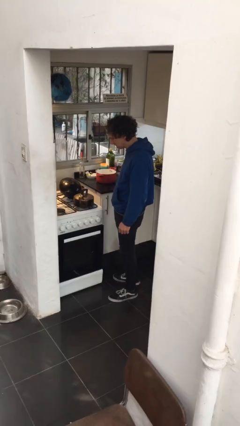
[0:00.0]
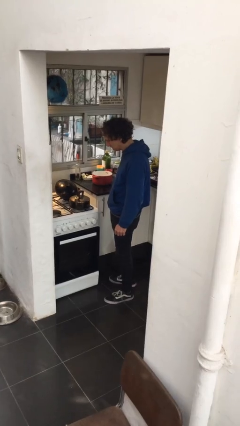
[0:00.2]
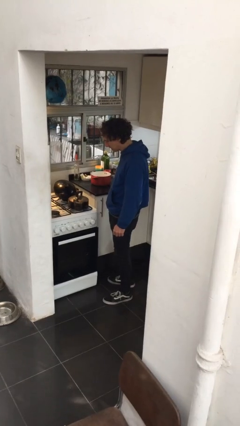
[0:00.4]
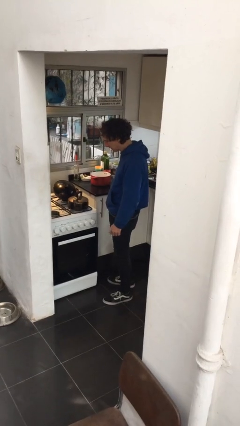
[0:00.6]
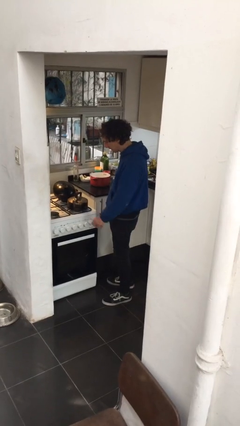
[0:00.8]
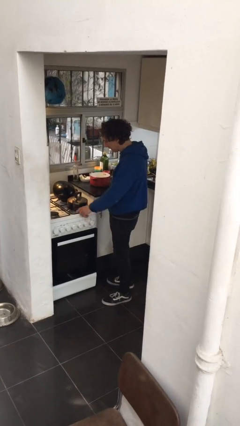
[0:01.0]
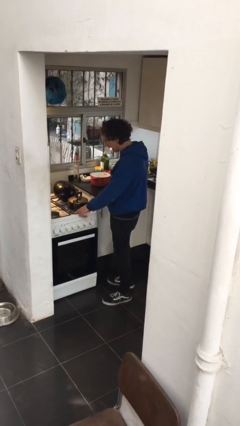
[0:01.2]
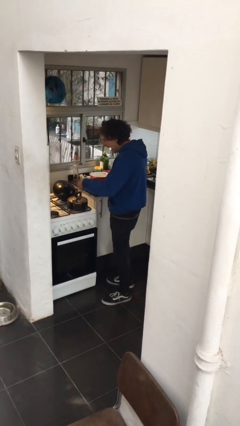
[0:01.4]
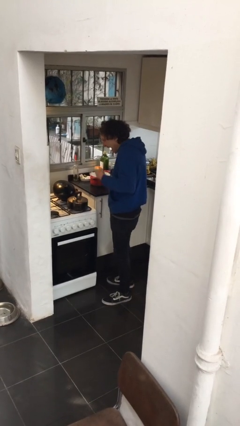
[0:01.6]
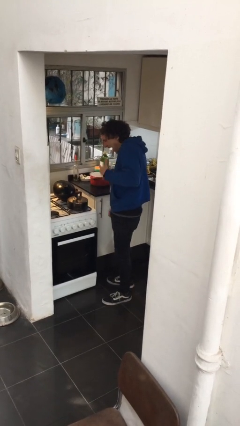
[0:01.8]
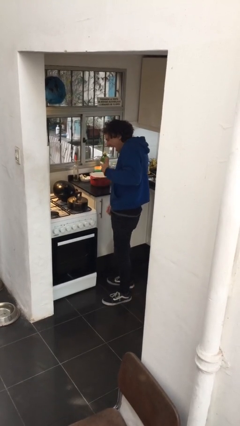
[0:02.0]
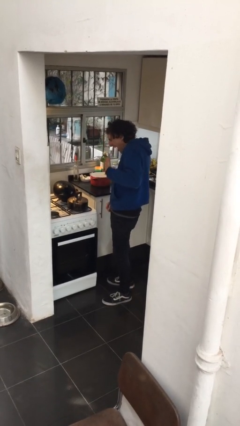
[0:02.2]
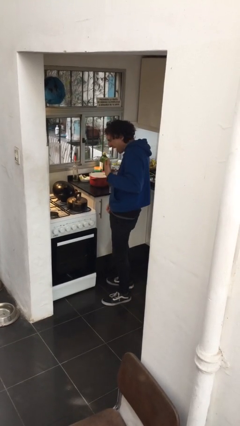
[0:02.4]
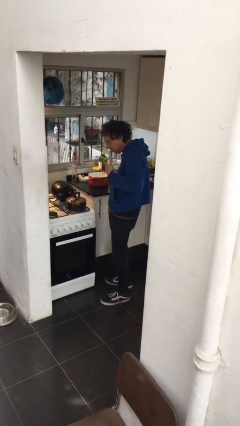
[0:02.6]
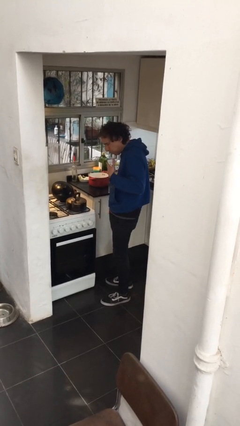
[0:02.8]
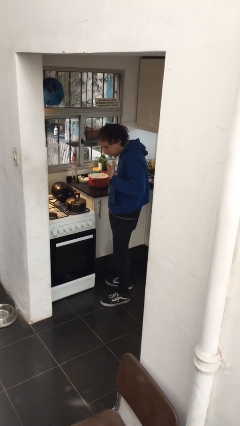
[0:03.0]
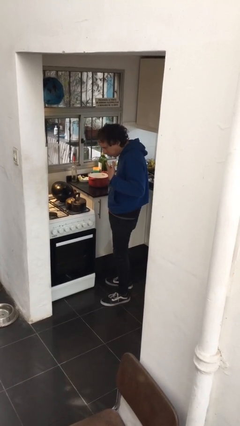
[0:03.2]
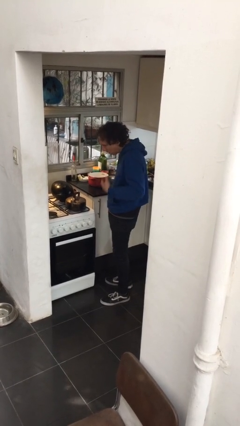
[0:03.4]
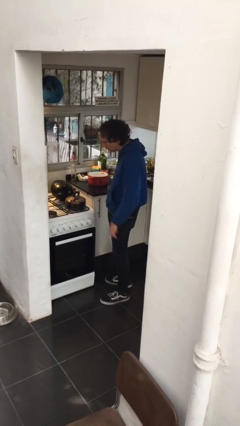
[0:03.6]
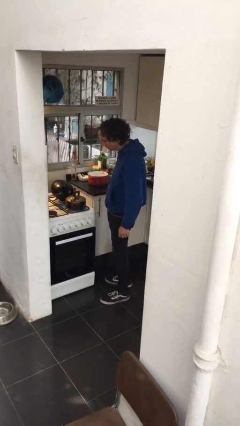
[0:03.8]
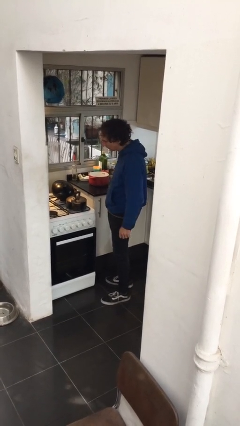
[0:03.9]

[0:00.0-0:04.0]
person burns hand

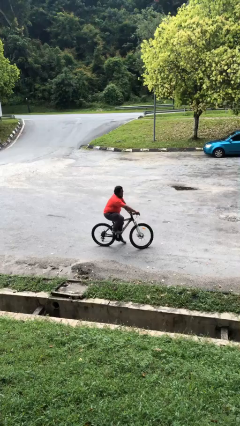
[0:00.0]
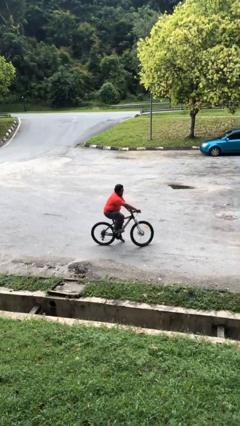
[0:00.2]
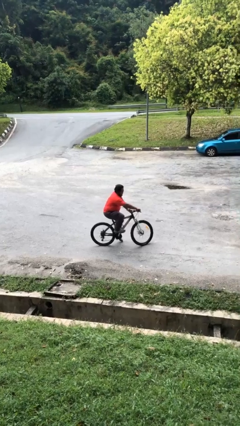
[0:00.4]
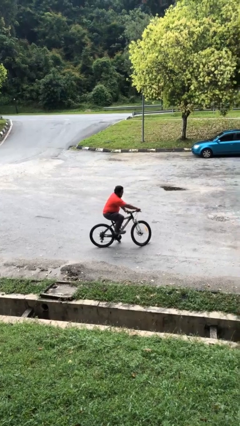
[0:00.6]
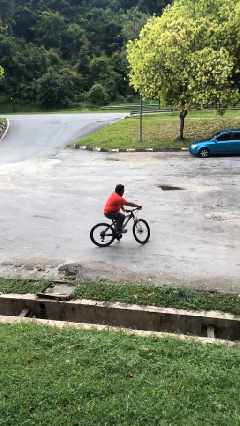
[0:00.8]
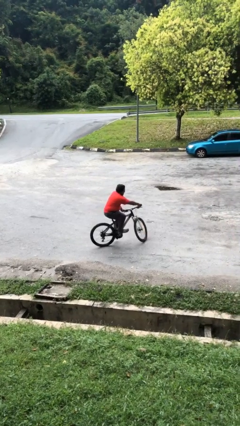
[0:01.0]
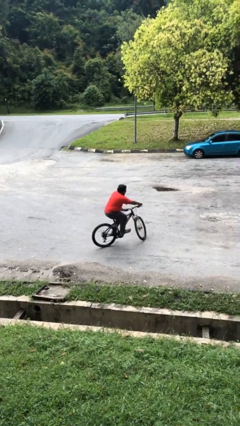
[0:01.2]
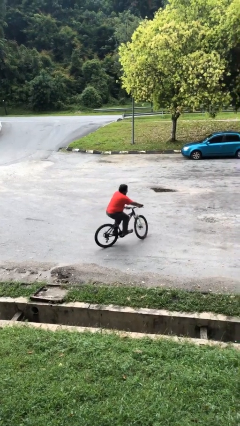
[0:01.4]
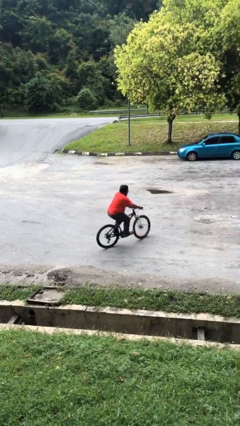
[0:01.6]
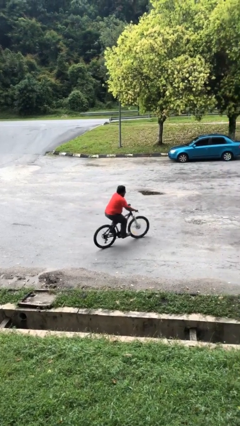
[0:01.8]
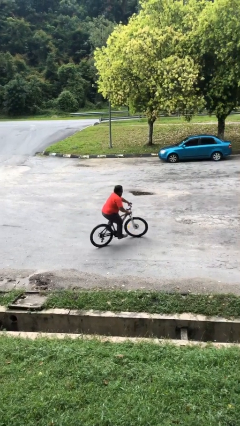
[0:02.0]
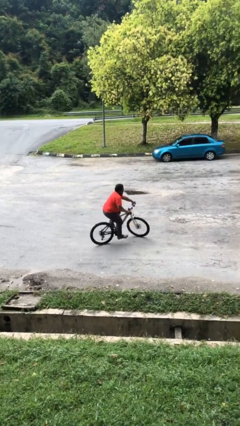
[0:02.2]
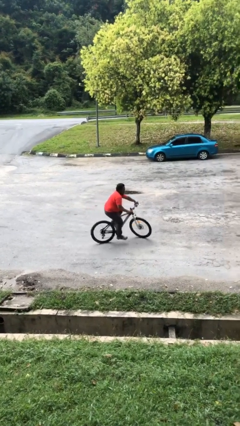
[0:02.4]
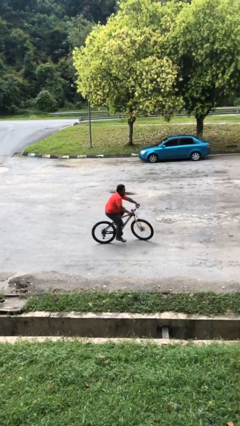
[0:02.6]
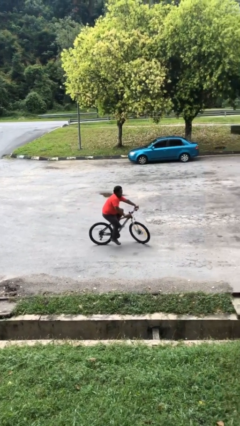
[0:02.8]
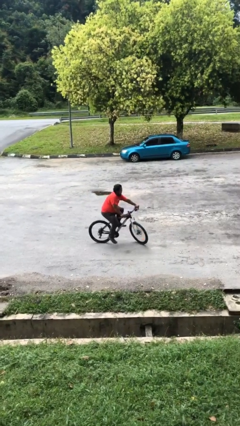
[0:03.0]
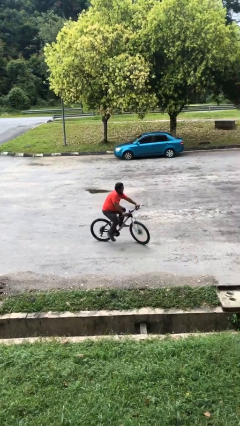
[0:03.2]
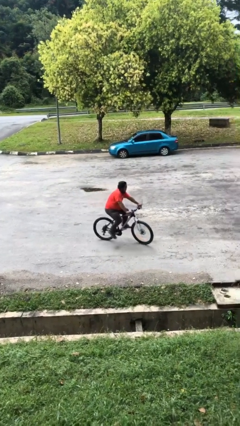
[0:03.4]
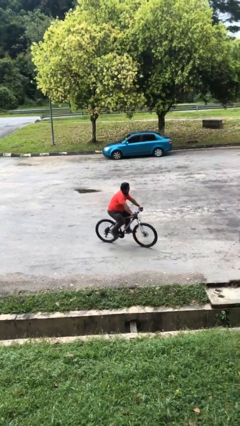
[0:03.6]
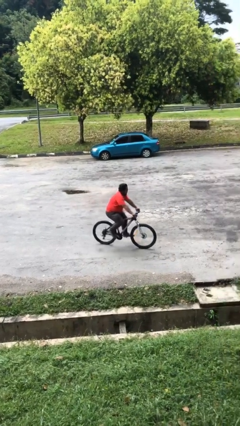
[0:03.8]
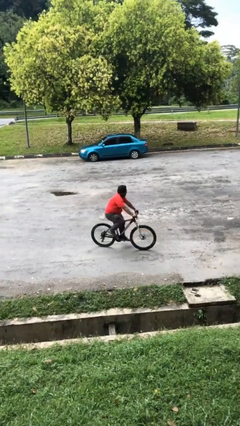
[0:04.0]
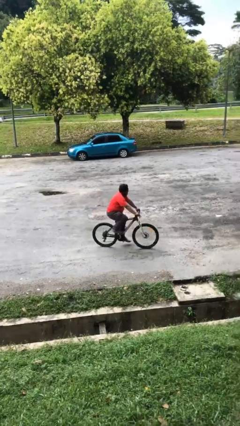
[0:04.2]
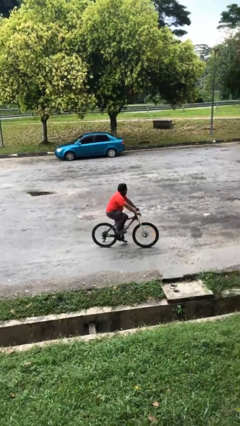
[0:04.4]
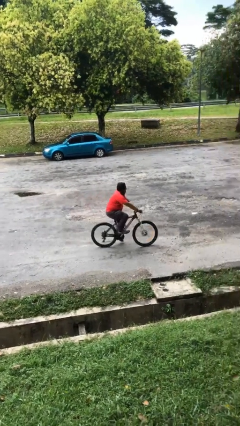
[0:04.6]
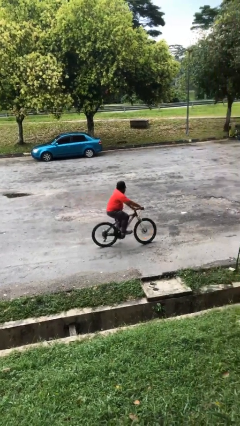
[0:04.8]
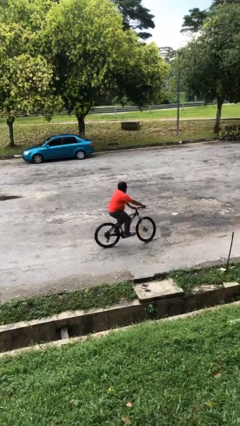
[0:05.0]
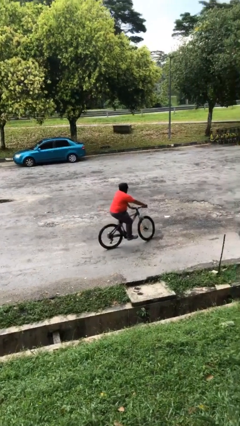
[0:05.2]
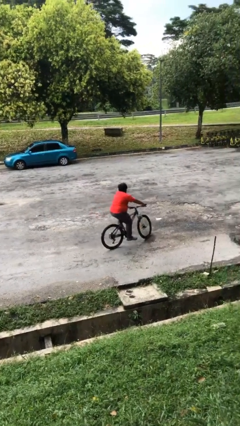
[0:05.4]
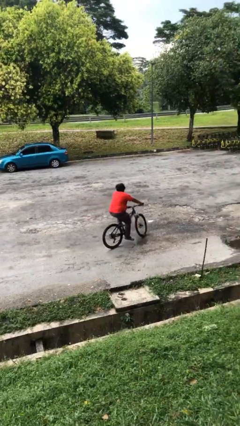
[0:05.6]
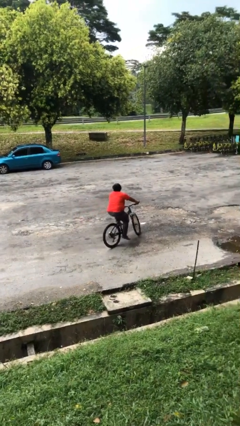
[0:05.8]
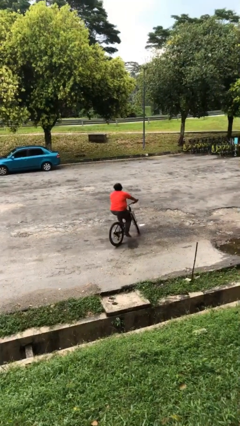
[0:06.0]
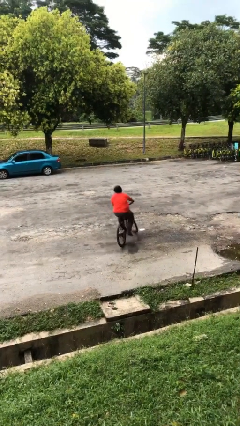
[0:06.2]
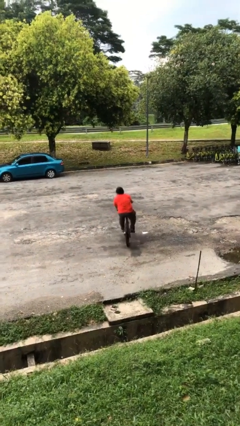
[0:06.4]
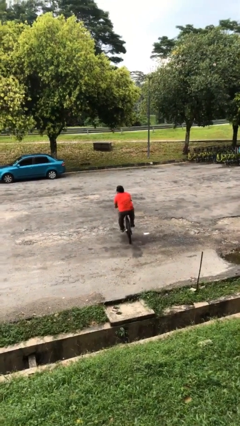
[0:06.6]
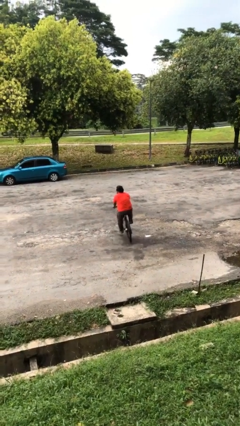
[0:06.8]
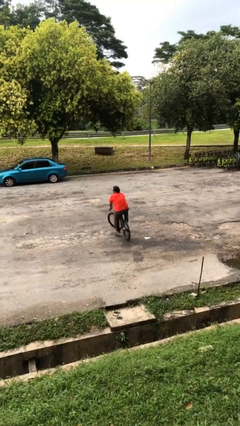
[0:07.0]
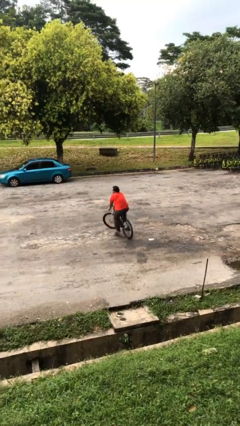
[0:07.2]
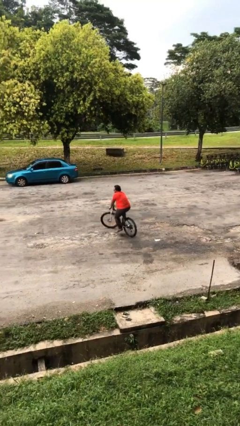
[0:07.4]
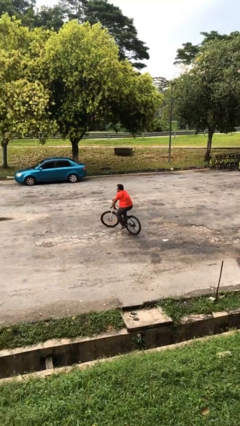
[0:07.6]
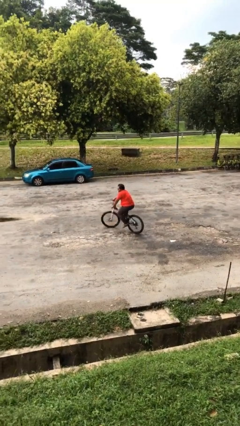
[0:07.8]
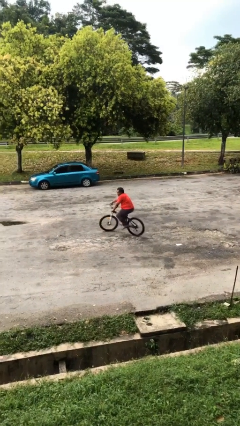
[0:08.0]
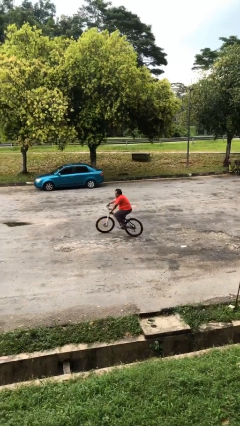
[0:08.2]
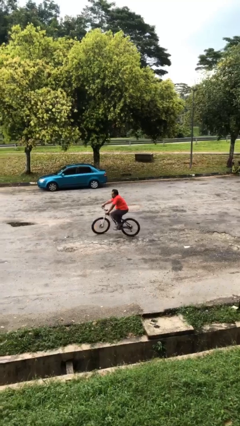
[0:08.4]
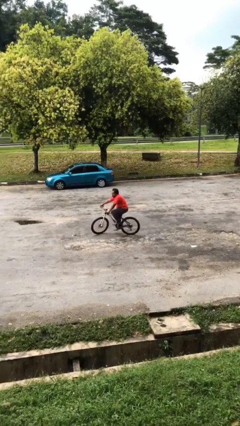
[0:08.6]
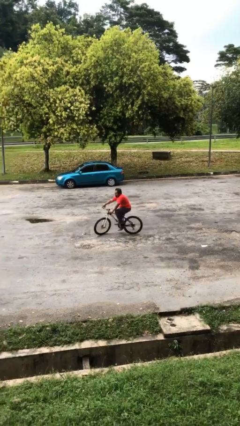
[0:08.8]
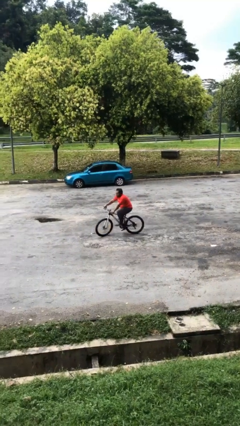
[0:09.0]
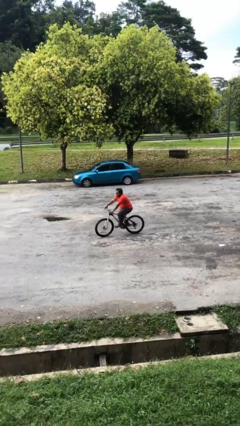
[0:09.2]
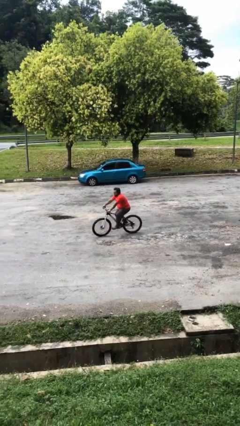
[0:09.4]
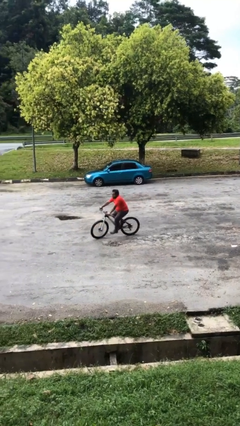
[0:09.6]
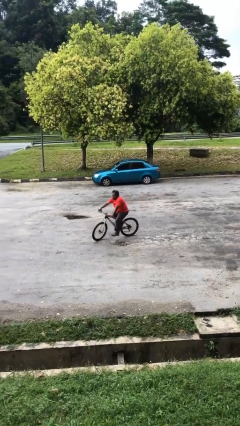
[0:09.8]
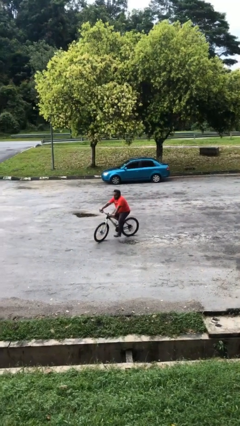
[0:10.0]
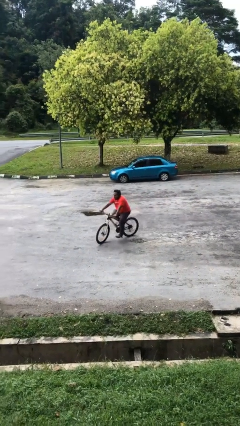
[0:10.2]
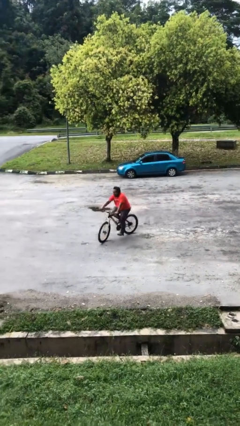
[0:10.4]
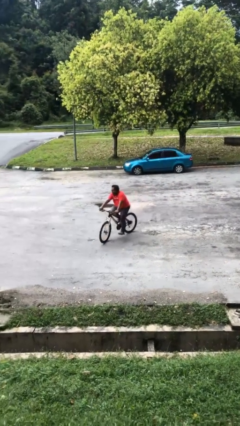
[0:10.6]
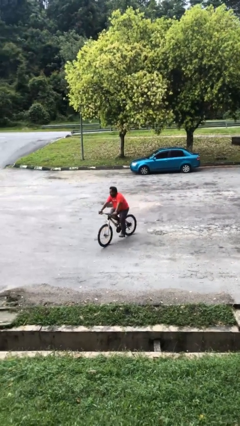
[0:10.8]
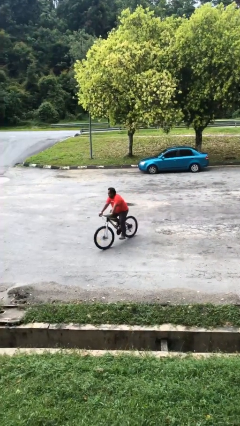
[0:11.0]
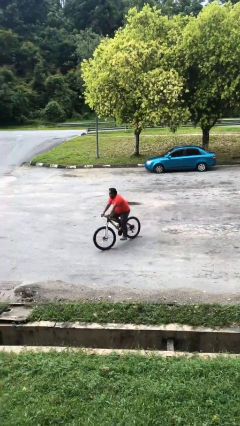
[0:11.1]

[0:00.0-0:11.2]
person rides bicycle

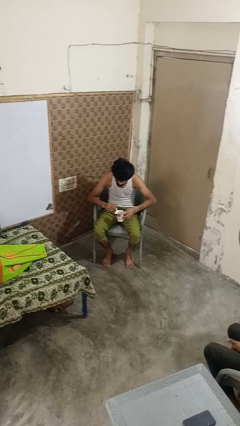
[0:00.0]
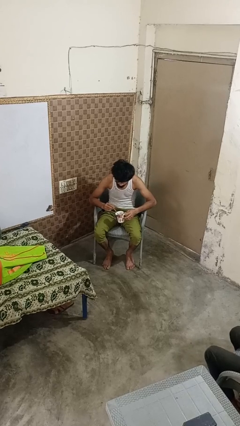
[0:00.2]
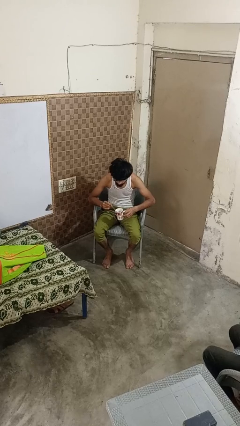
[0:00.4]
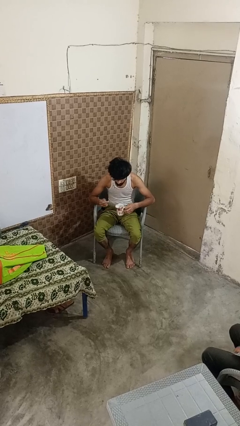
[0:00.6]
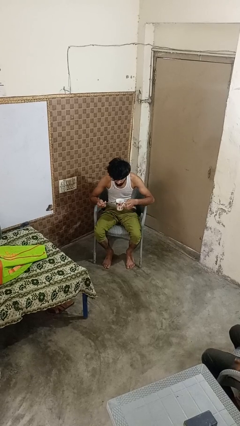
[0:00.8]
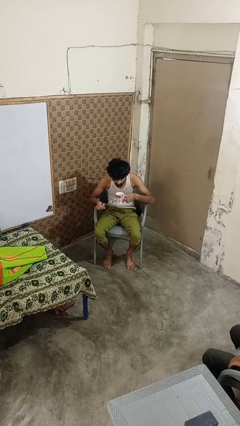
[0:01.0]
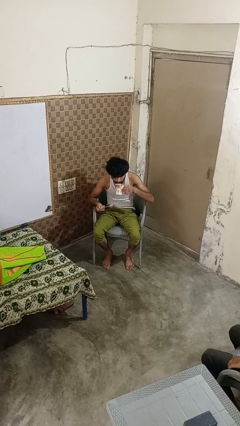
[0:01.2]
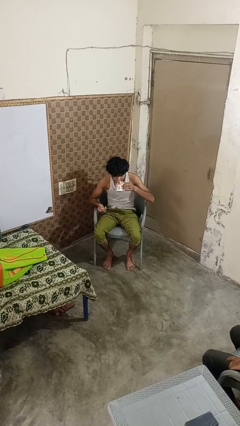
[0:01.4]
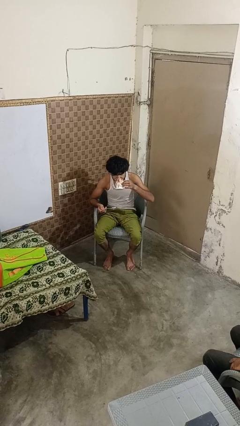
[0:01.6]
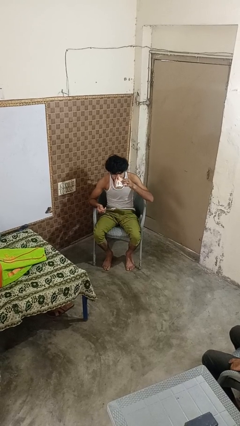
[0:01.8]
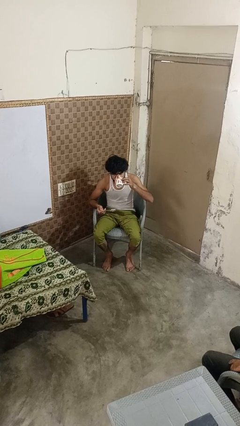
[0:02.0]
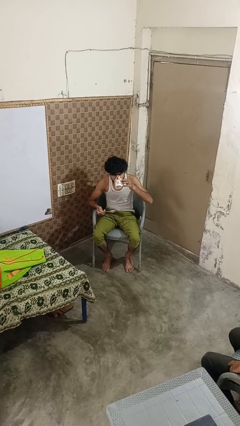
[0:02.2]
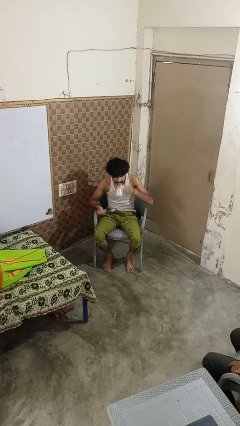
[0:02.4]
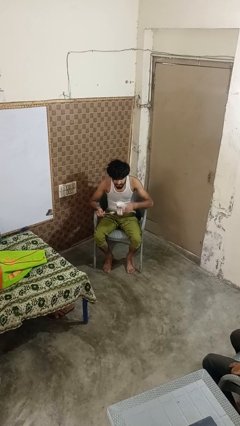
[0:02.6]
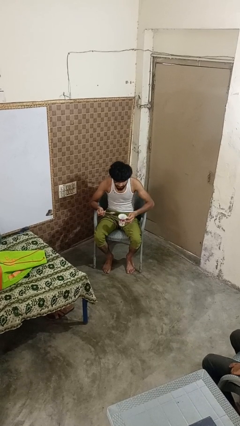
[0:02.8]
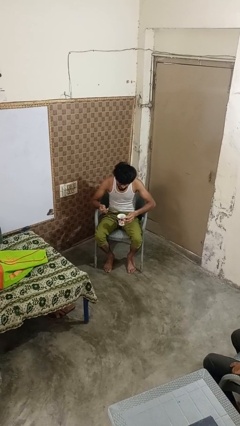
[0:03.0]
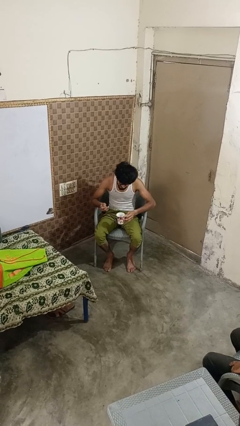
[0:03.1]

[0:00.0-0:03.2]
person drinks from mug
